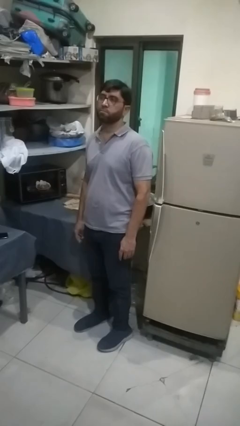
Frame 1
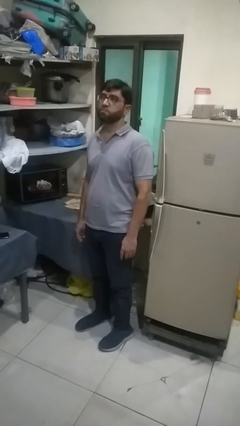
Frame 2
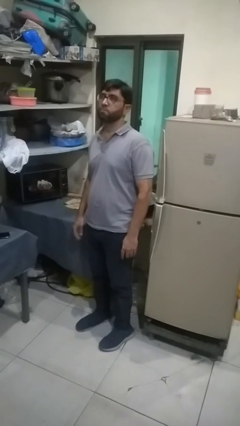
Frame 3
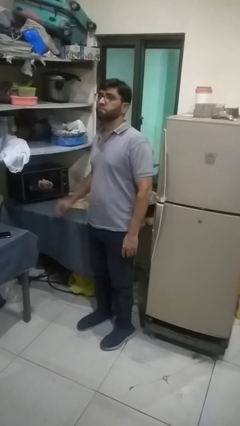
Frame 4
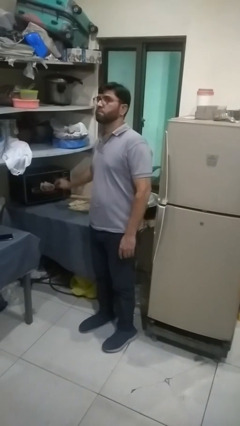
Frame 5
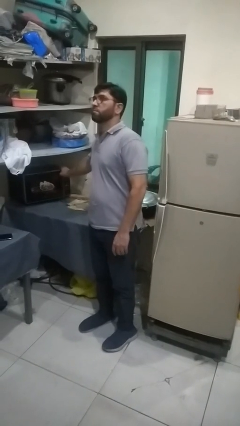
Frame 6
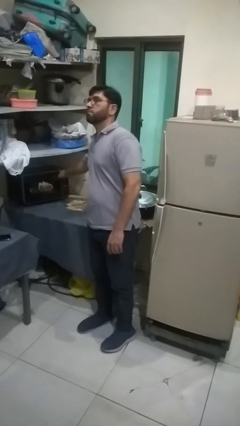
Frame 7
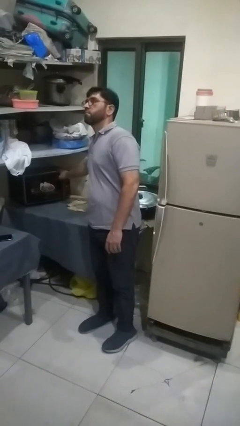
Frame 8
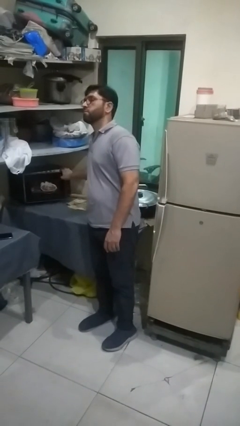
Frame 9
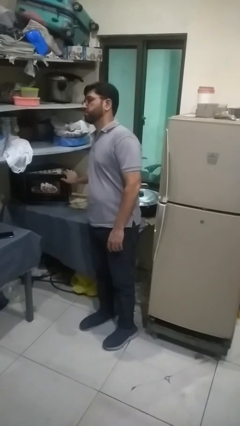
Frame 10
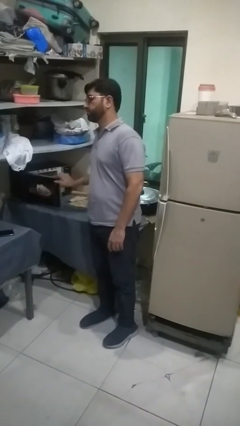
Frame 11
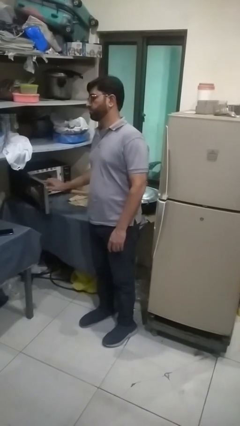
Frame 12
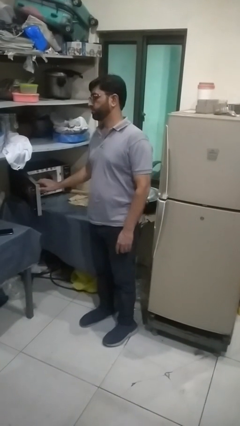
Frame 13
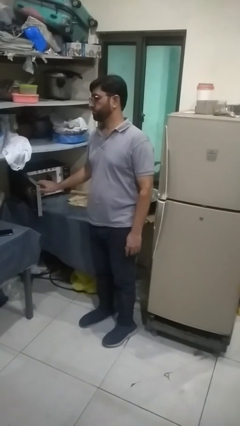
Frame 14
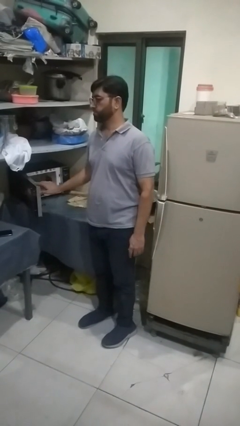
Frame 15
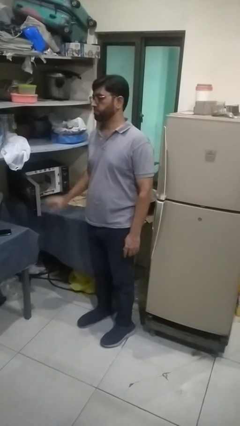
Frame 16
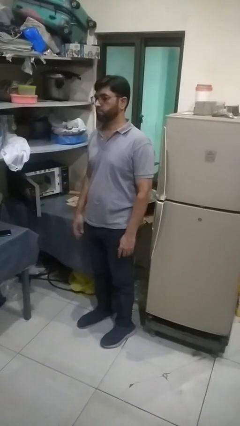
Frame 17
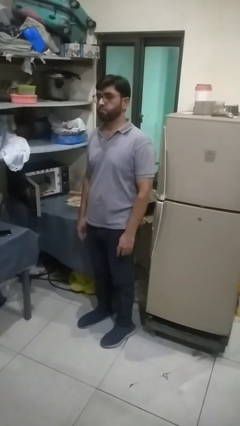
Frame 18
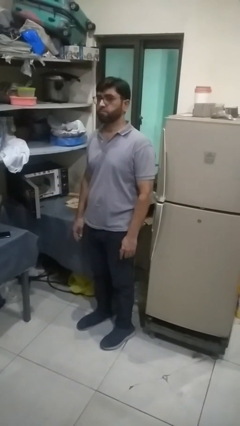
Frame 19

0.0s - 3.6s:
person opens oven door

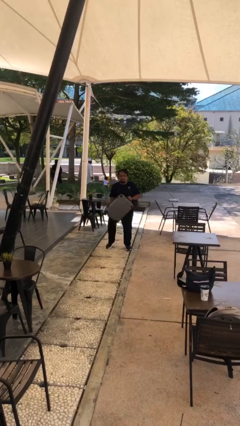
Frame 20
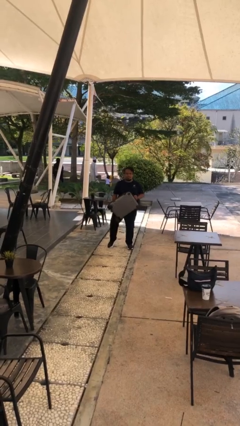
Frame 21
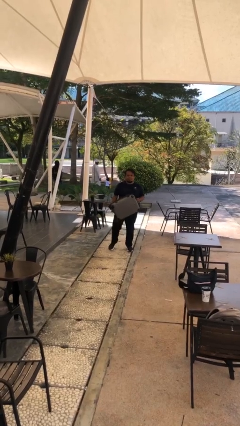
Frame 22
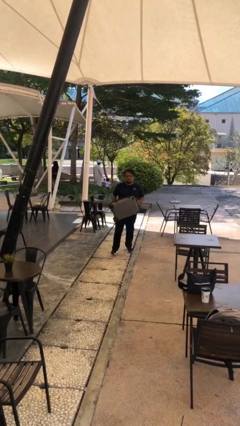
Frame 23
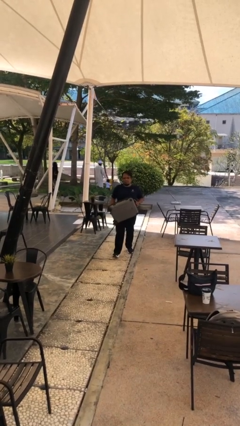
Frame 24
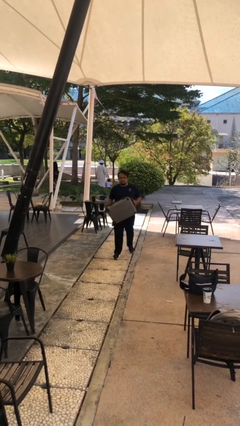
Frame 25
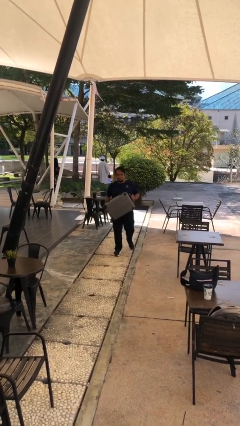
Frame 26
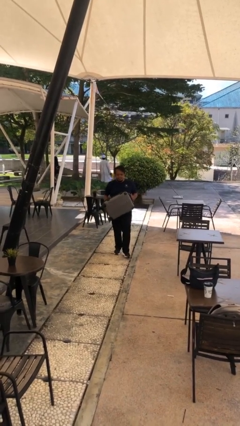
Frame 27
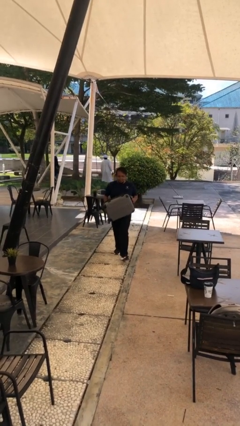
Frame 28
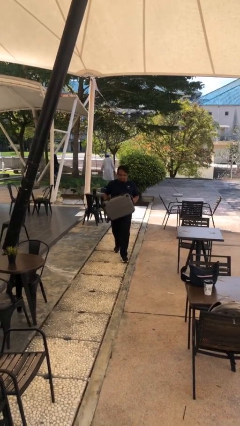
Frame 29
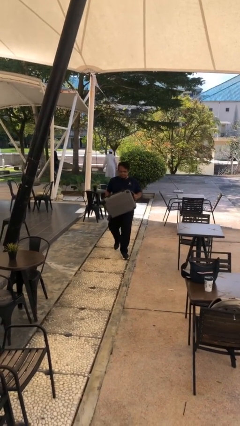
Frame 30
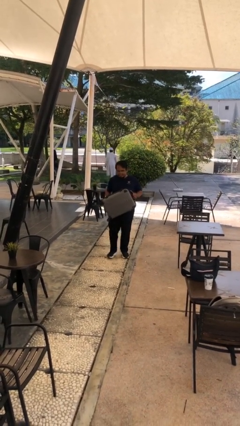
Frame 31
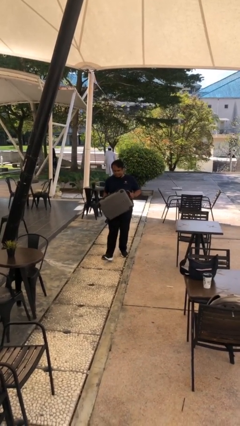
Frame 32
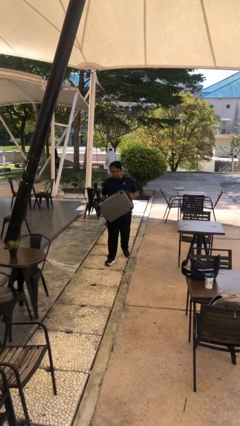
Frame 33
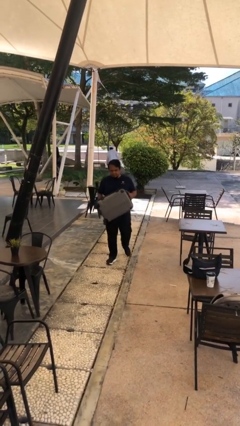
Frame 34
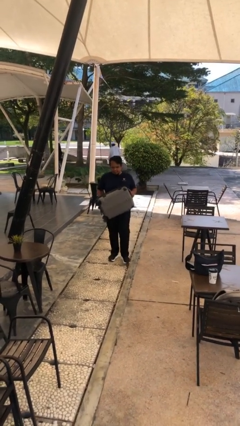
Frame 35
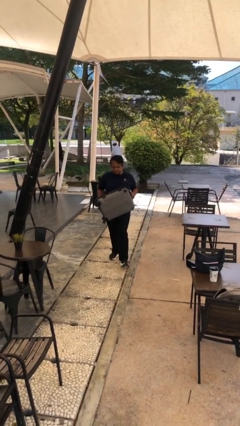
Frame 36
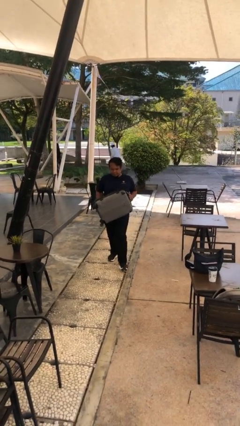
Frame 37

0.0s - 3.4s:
person carries heavy object

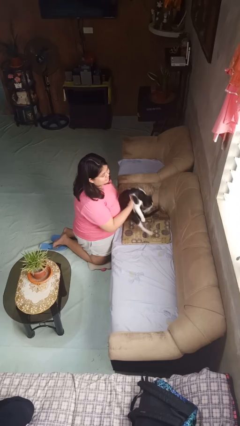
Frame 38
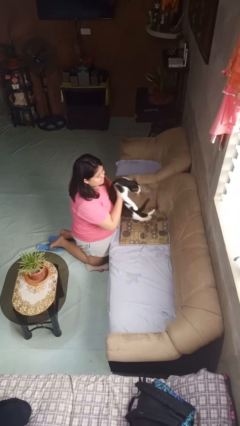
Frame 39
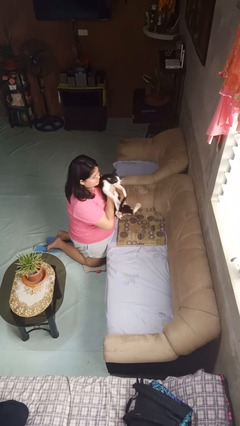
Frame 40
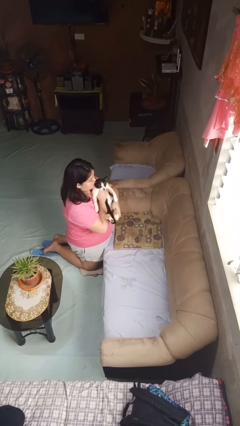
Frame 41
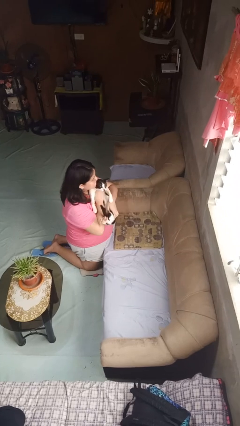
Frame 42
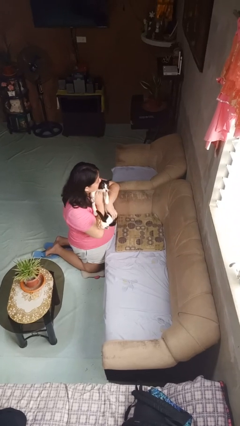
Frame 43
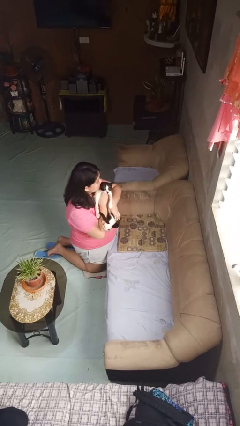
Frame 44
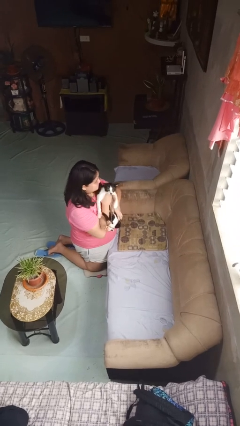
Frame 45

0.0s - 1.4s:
person hugs cat

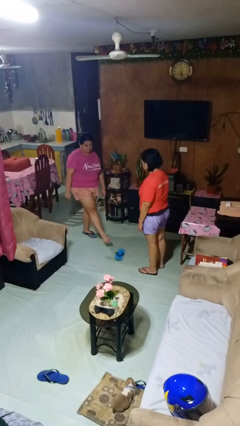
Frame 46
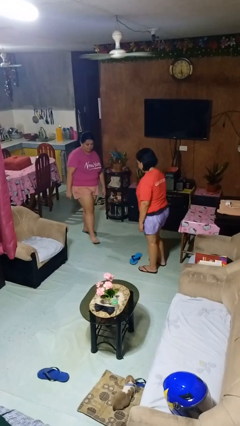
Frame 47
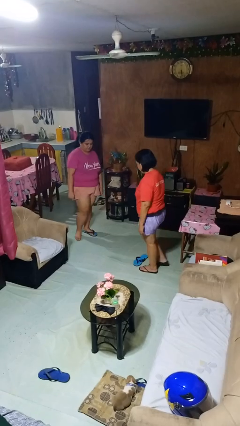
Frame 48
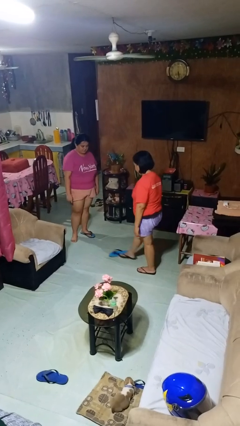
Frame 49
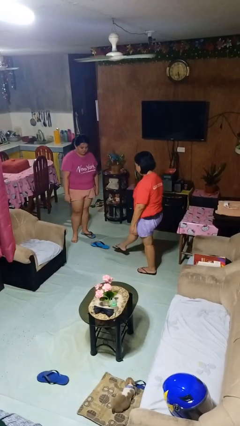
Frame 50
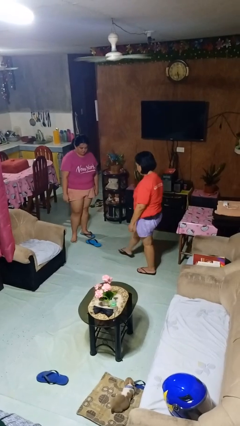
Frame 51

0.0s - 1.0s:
person kicks object to person

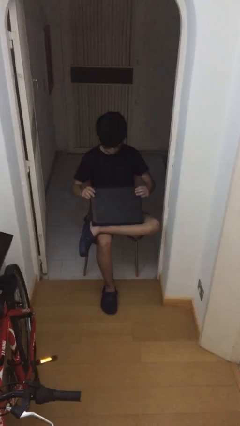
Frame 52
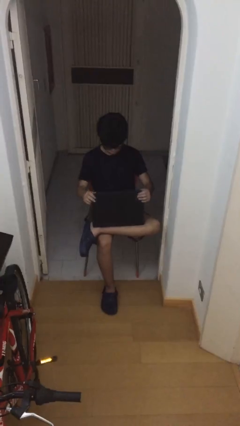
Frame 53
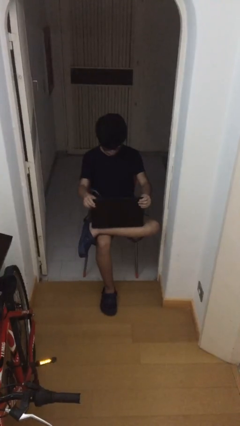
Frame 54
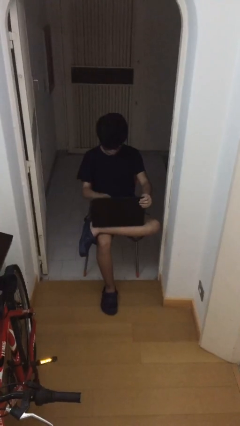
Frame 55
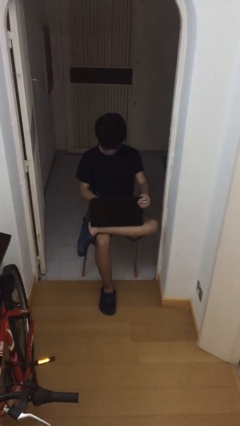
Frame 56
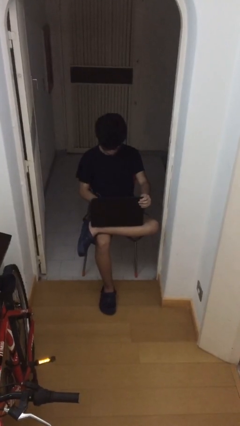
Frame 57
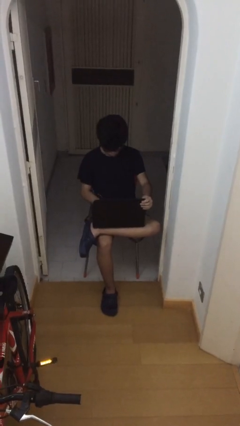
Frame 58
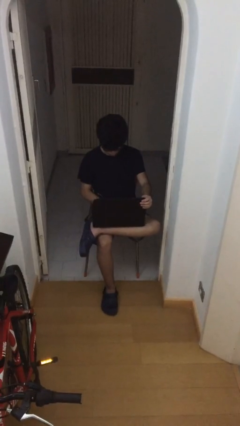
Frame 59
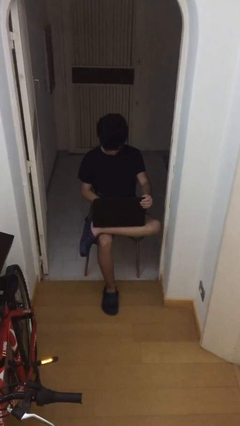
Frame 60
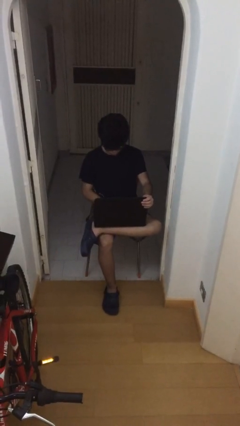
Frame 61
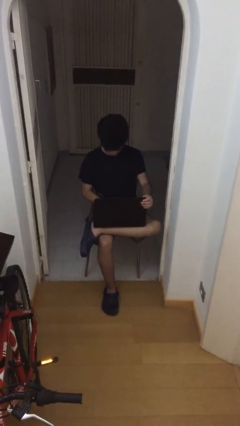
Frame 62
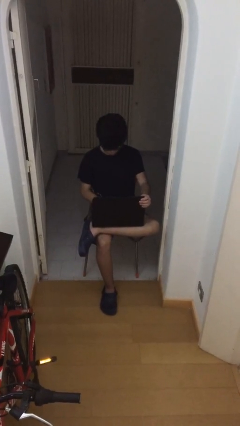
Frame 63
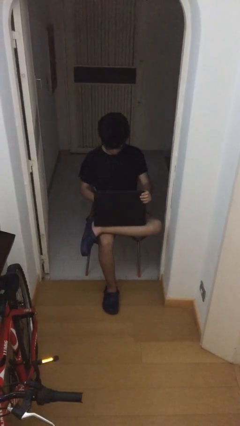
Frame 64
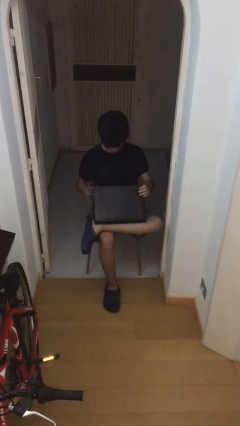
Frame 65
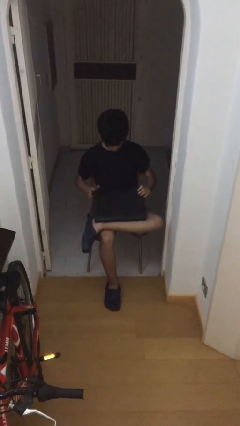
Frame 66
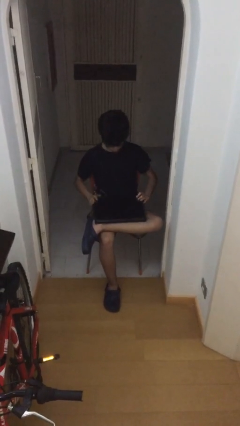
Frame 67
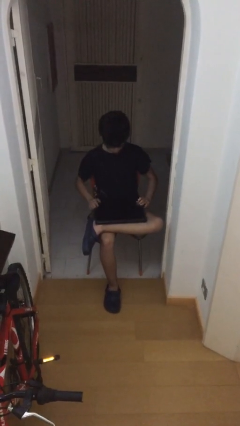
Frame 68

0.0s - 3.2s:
person interacts with laptop

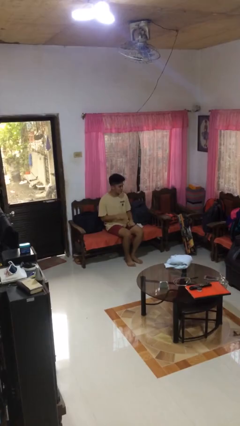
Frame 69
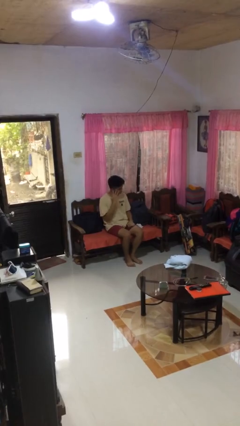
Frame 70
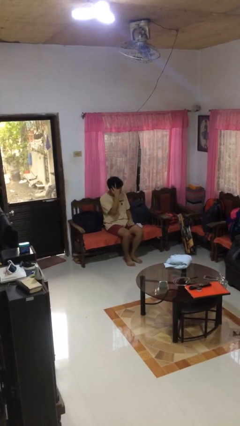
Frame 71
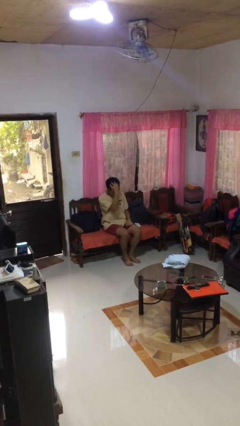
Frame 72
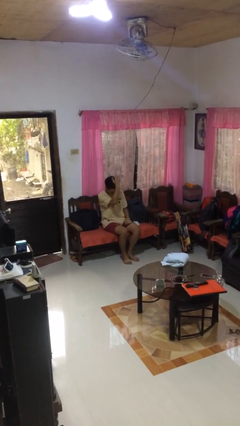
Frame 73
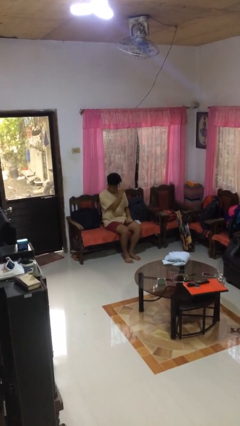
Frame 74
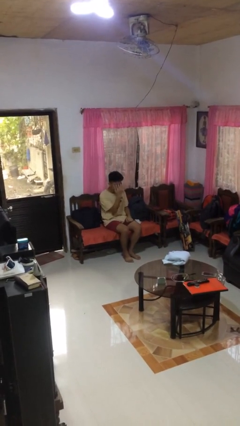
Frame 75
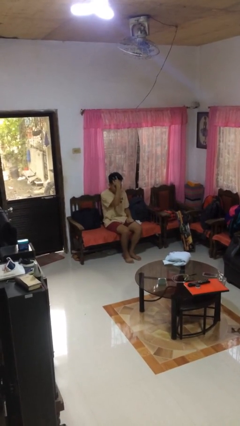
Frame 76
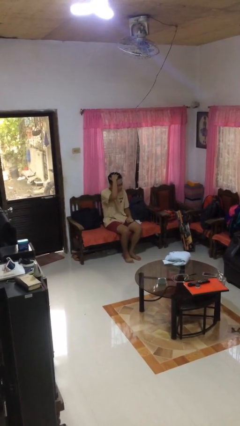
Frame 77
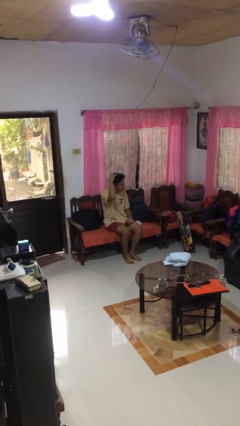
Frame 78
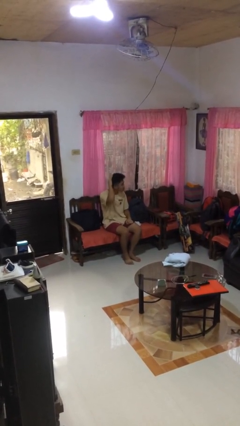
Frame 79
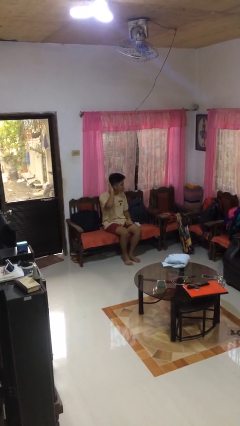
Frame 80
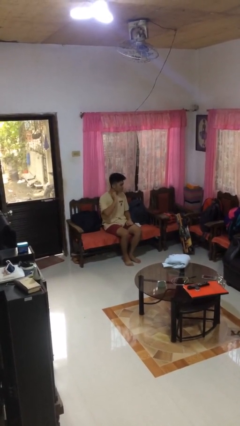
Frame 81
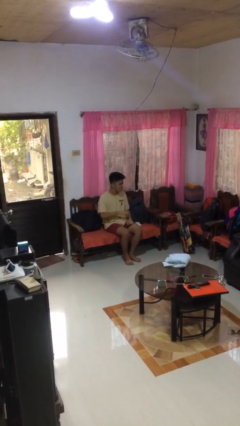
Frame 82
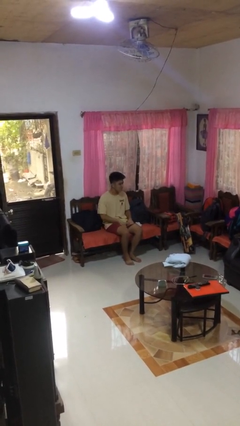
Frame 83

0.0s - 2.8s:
person strokes hair

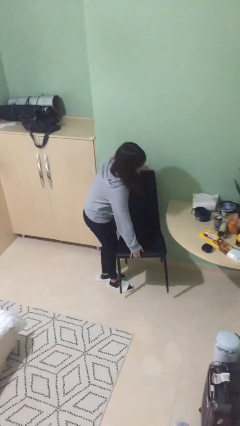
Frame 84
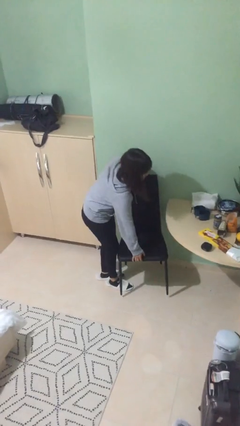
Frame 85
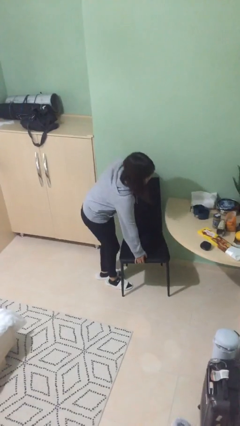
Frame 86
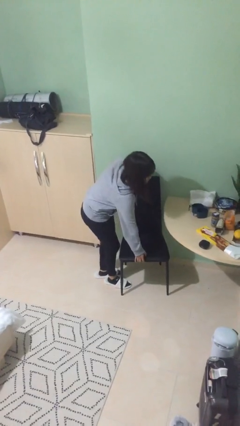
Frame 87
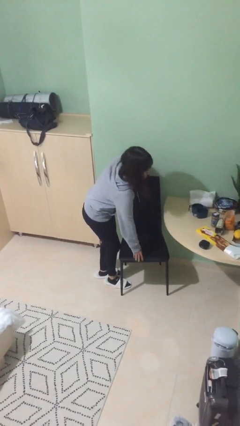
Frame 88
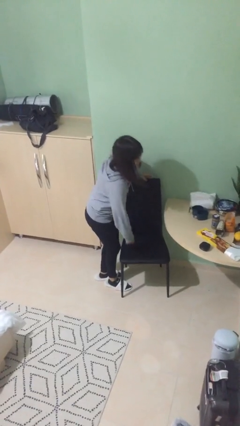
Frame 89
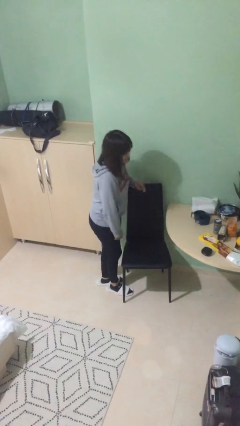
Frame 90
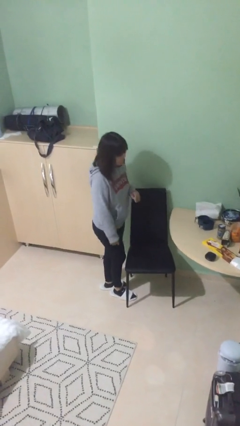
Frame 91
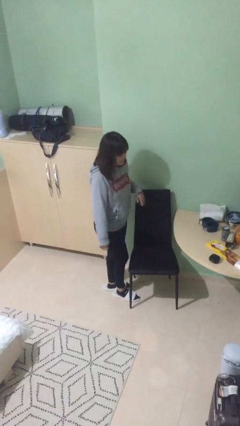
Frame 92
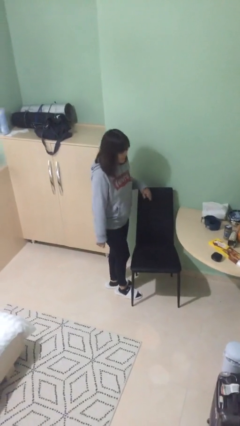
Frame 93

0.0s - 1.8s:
person puts down object on floor
